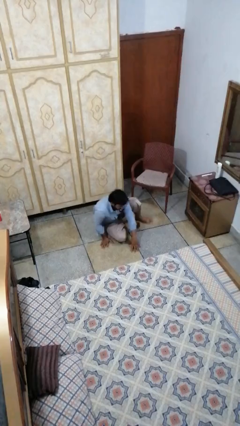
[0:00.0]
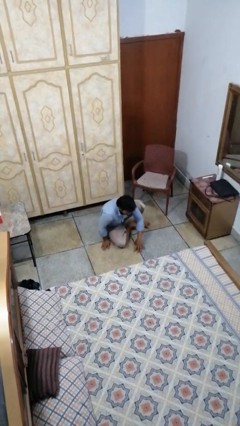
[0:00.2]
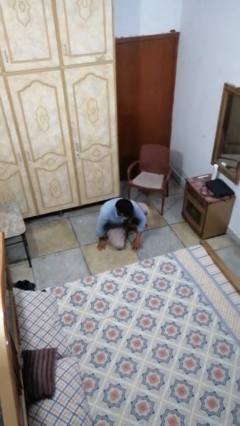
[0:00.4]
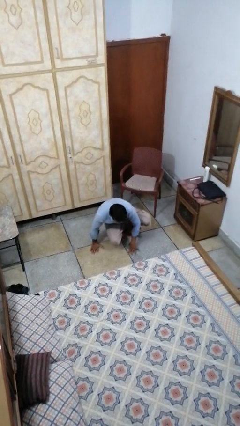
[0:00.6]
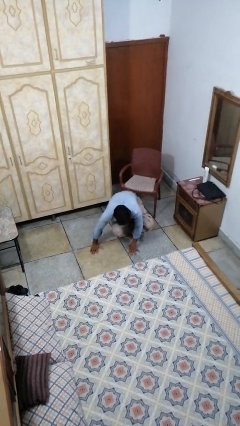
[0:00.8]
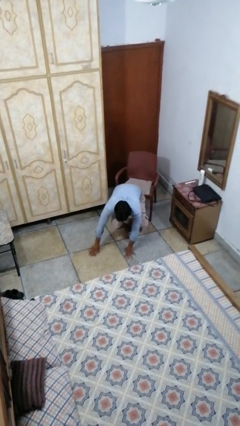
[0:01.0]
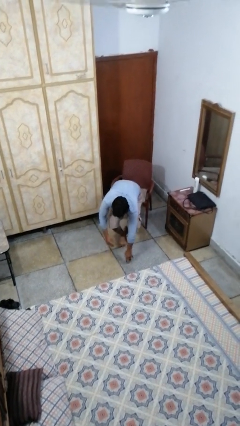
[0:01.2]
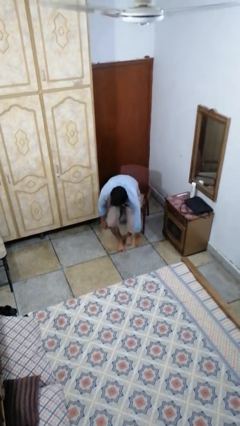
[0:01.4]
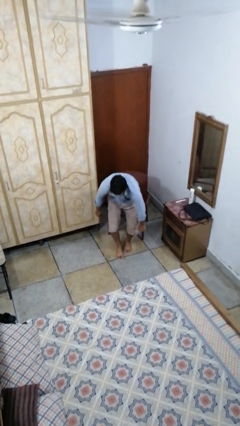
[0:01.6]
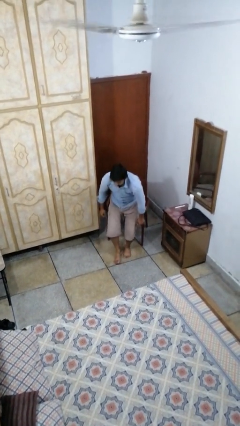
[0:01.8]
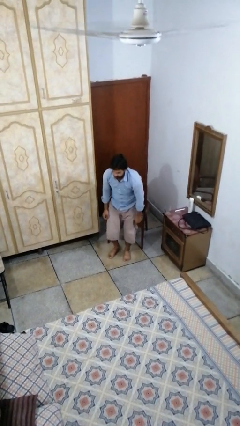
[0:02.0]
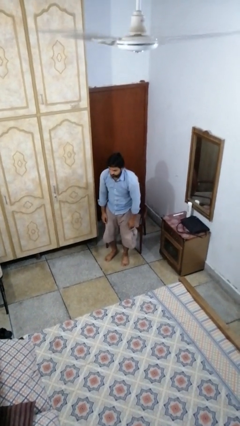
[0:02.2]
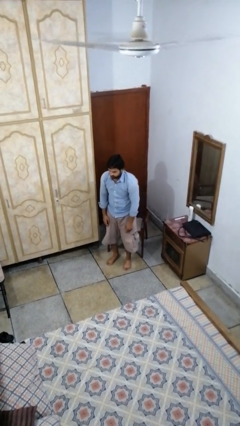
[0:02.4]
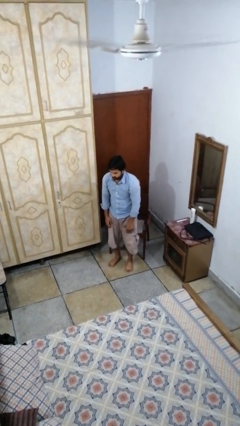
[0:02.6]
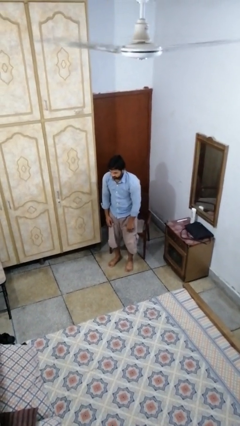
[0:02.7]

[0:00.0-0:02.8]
person stands up from floor

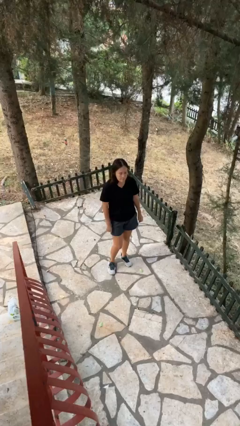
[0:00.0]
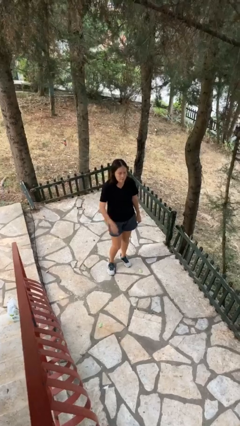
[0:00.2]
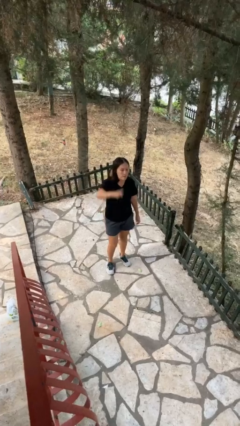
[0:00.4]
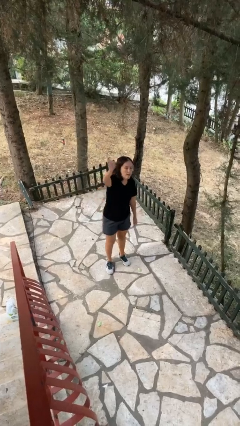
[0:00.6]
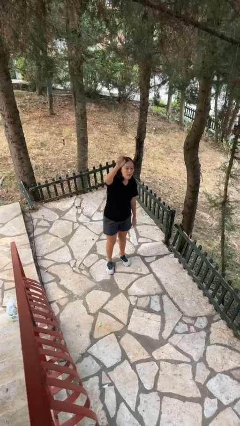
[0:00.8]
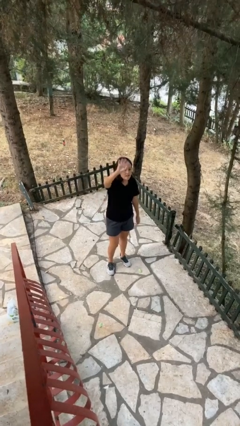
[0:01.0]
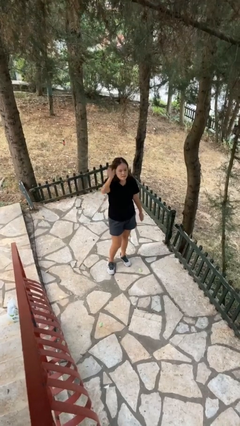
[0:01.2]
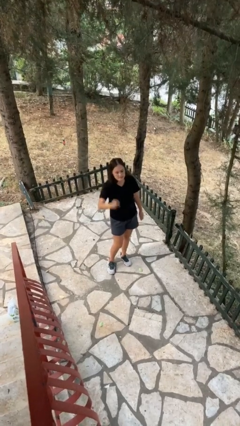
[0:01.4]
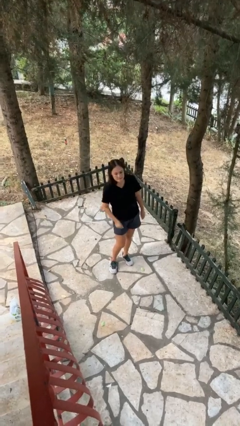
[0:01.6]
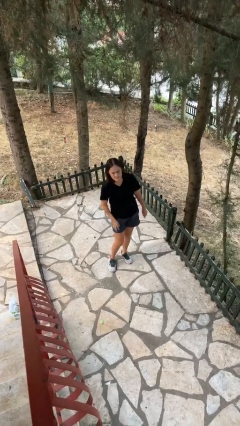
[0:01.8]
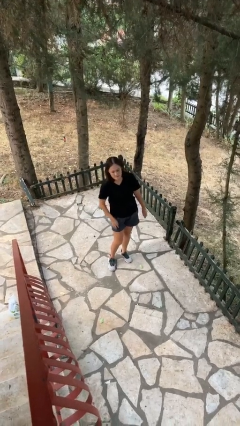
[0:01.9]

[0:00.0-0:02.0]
person gestures raise hand

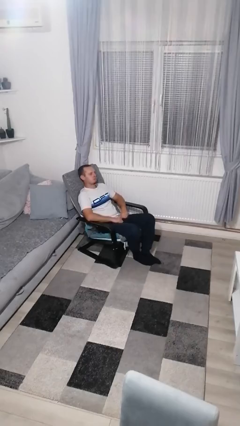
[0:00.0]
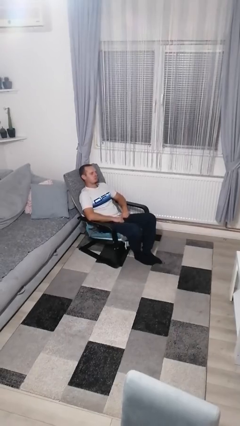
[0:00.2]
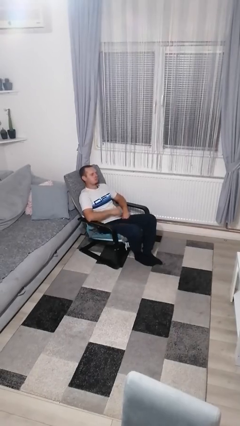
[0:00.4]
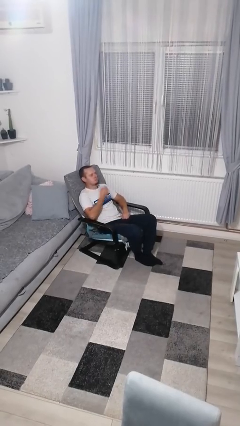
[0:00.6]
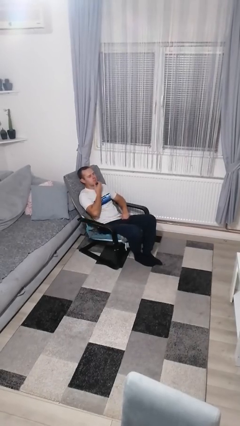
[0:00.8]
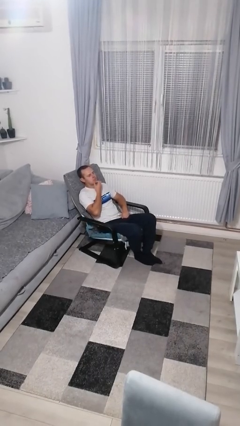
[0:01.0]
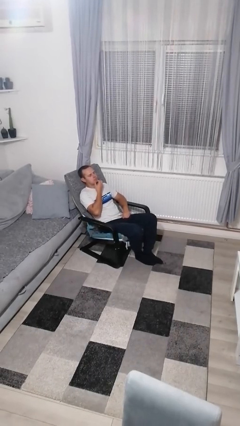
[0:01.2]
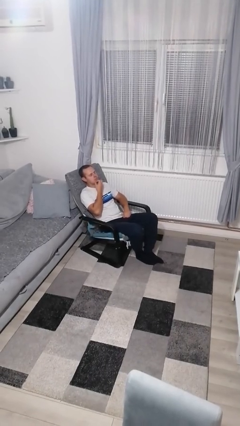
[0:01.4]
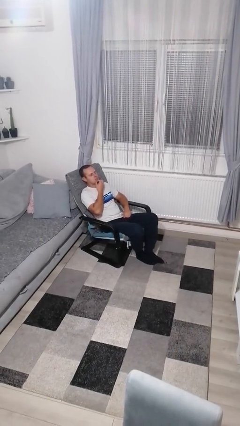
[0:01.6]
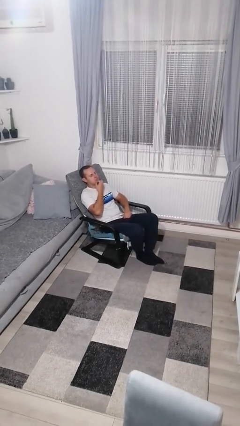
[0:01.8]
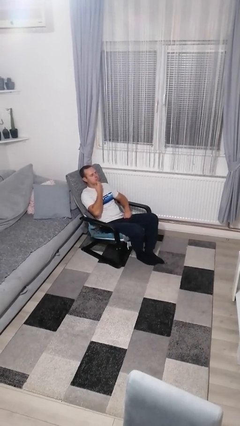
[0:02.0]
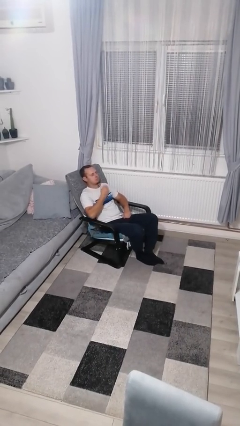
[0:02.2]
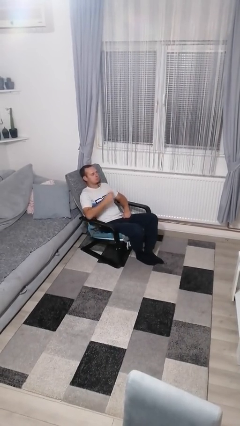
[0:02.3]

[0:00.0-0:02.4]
person strokes chin

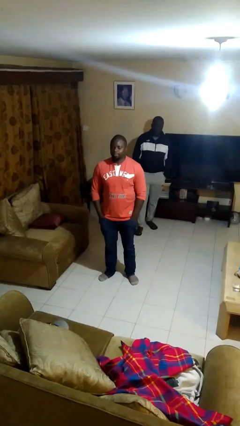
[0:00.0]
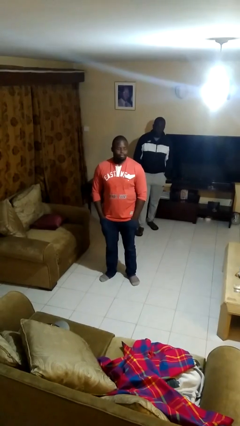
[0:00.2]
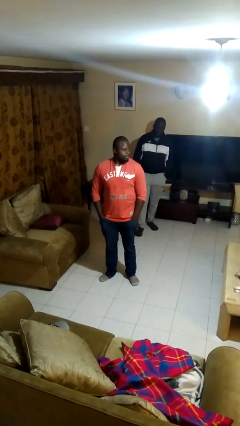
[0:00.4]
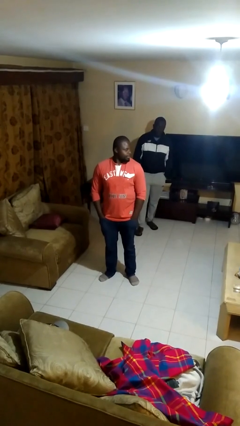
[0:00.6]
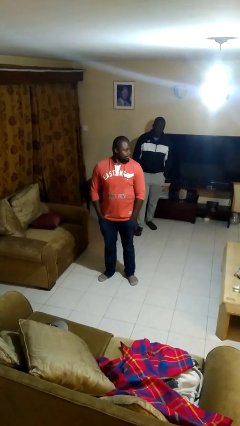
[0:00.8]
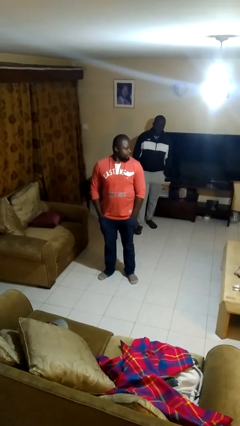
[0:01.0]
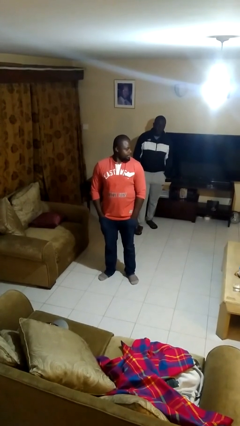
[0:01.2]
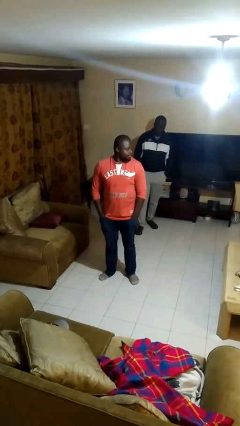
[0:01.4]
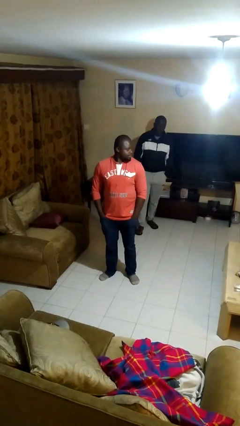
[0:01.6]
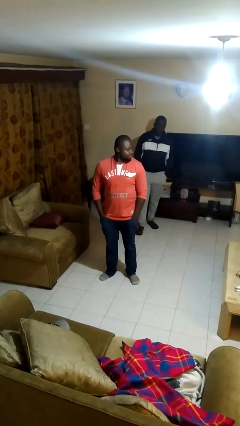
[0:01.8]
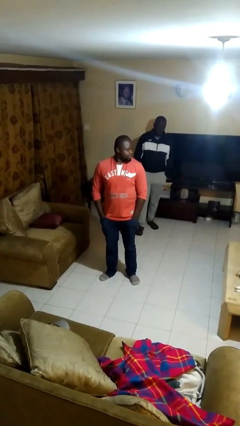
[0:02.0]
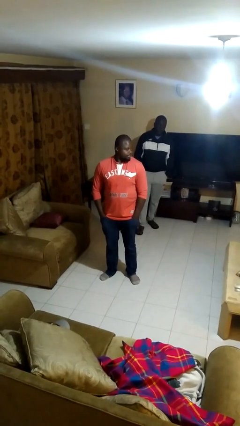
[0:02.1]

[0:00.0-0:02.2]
person looks over shoulder

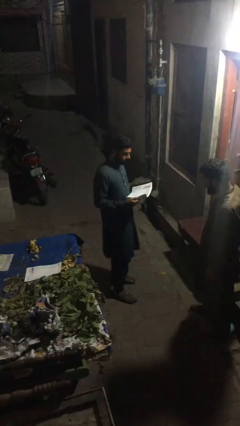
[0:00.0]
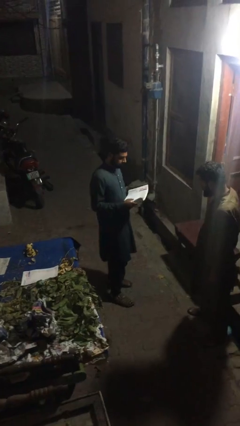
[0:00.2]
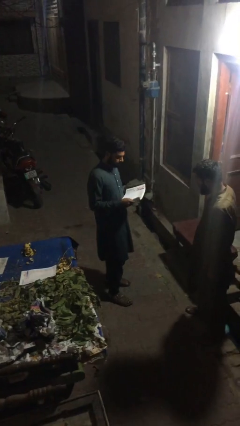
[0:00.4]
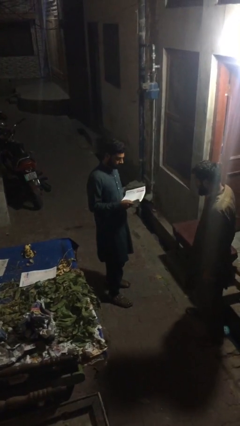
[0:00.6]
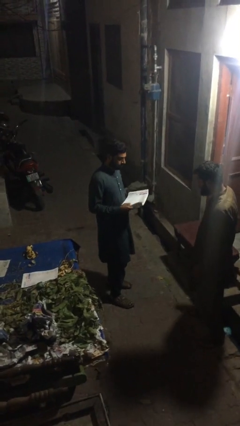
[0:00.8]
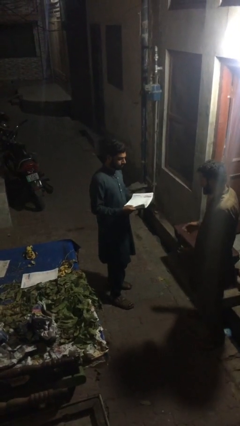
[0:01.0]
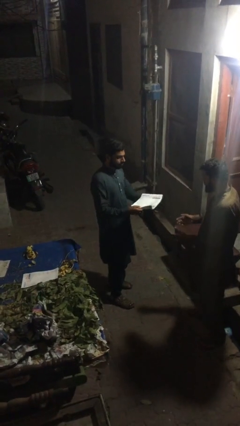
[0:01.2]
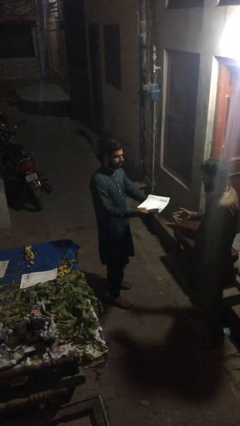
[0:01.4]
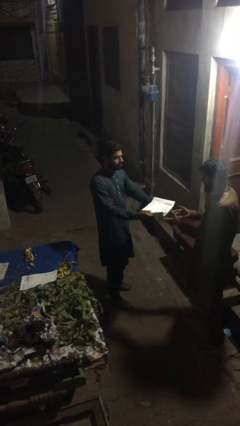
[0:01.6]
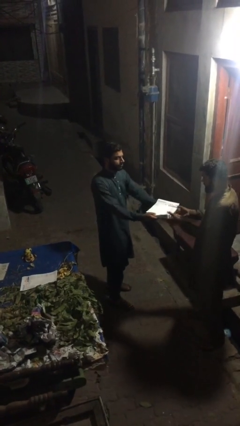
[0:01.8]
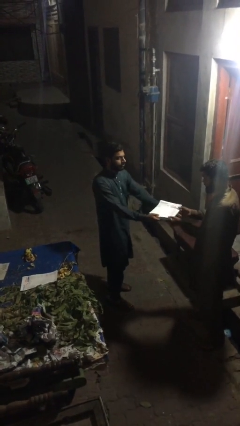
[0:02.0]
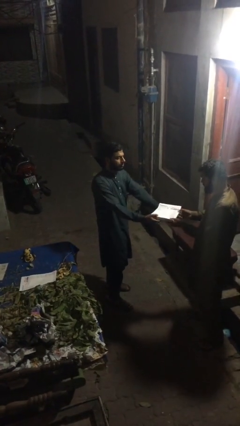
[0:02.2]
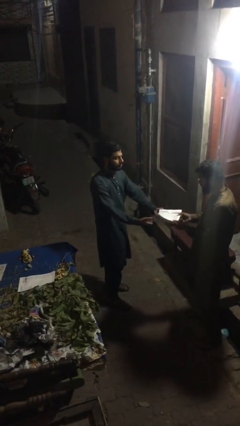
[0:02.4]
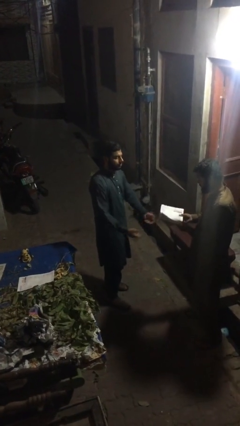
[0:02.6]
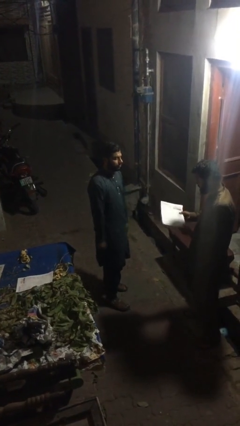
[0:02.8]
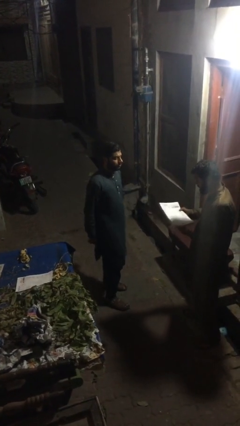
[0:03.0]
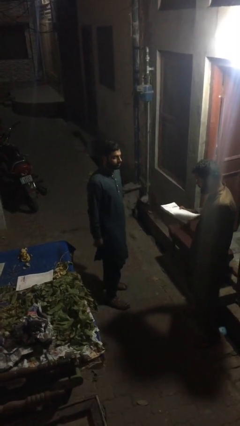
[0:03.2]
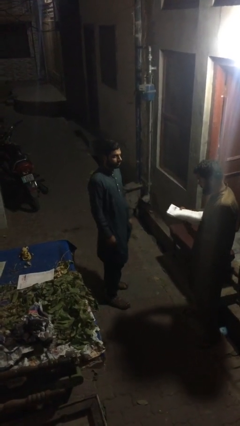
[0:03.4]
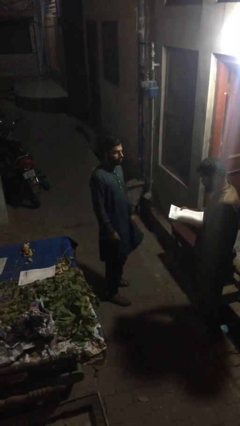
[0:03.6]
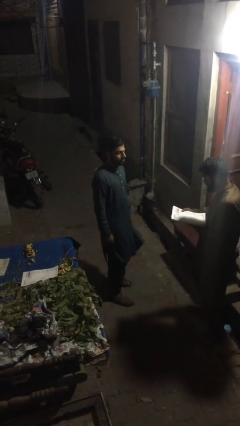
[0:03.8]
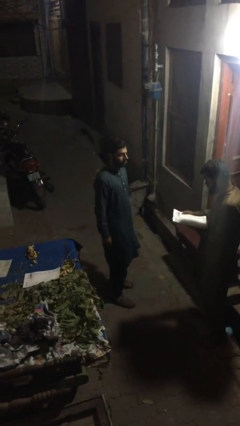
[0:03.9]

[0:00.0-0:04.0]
person transfers object to person

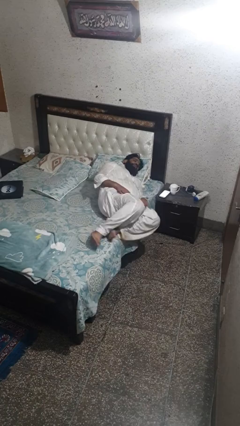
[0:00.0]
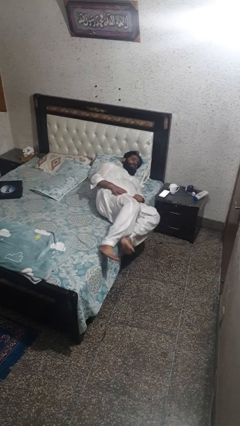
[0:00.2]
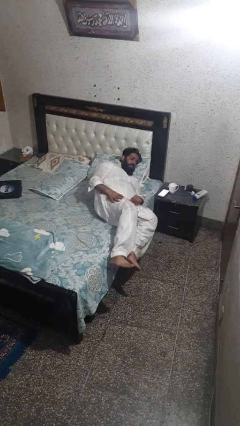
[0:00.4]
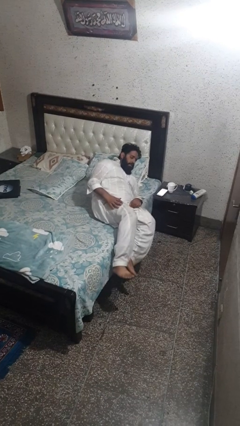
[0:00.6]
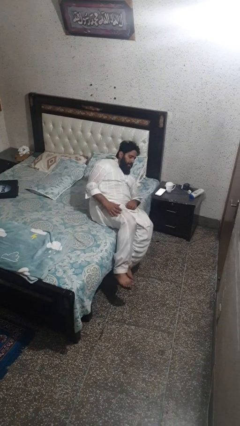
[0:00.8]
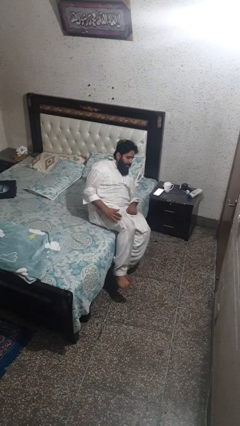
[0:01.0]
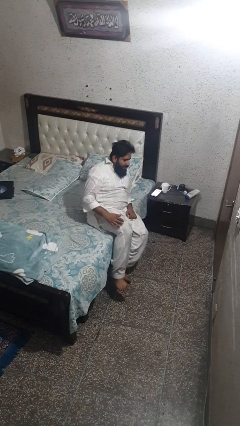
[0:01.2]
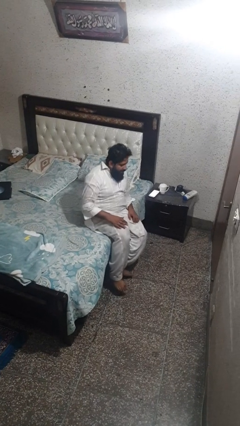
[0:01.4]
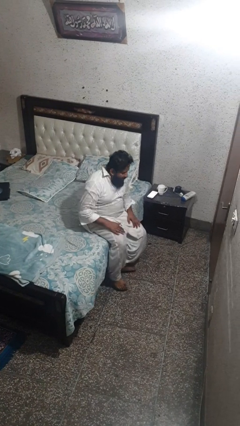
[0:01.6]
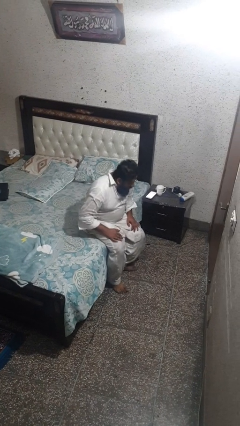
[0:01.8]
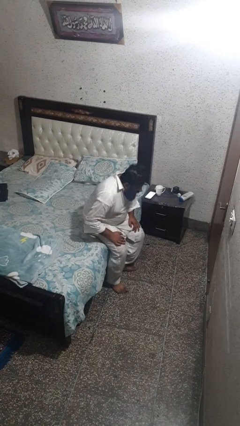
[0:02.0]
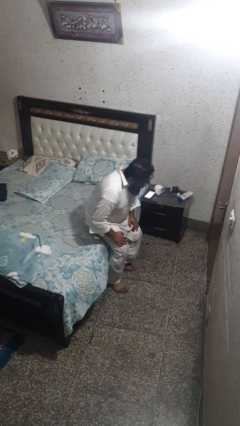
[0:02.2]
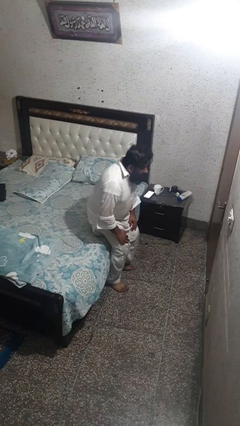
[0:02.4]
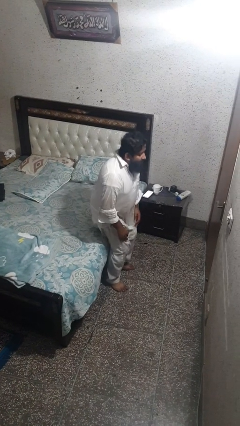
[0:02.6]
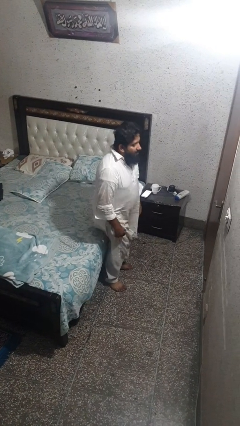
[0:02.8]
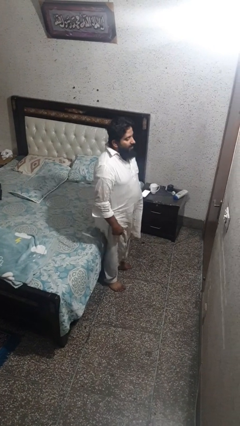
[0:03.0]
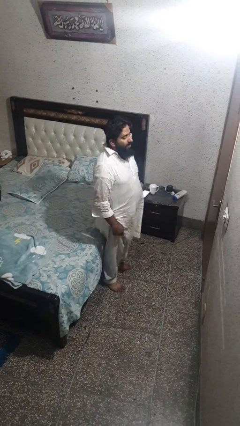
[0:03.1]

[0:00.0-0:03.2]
person stands up

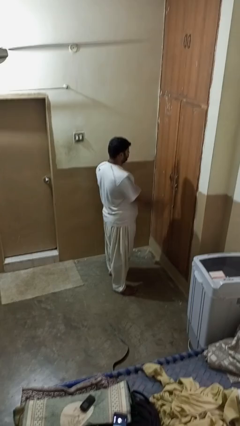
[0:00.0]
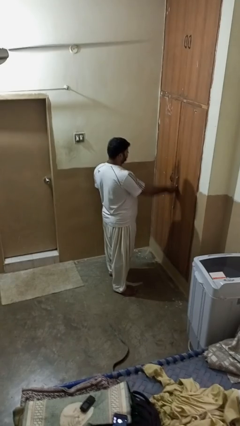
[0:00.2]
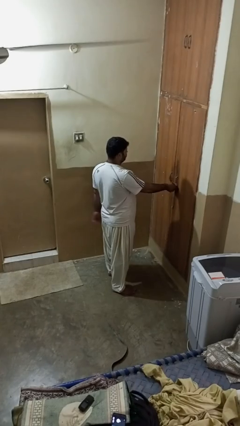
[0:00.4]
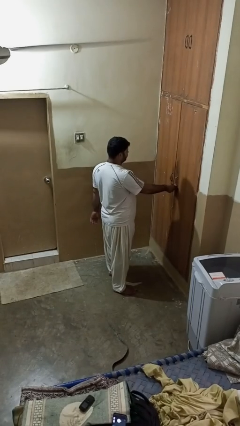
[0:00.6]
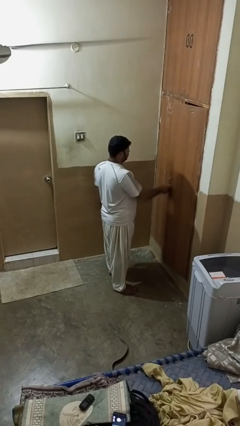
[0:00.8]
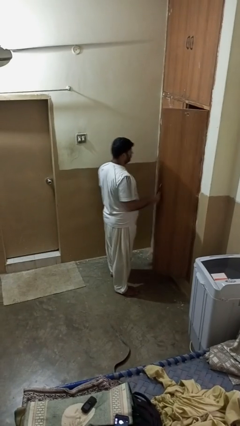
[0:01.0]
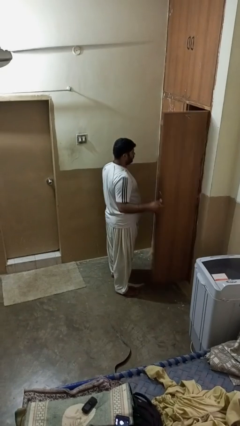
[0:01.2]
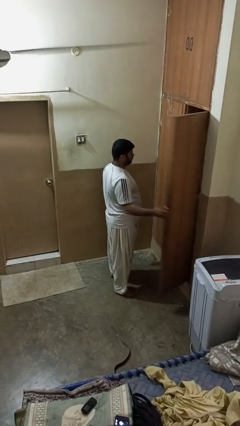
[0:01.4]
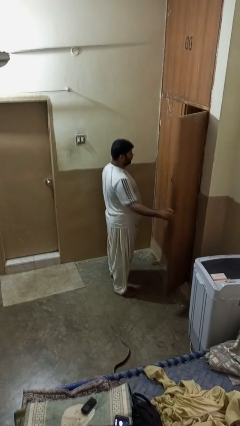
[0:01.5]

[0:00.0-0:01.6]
person opens closet door
